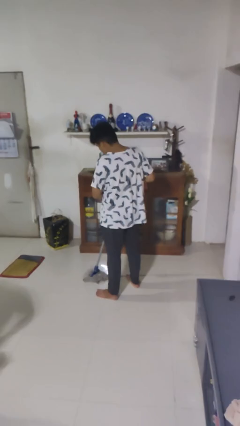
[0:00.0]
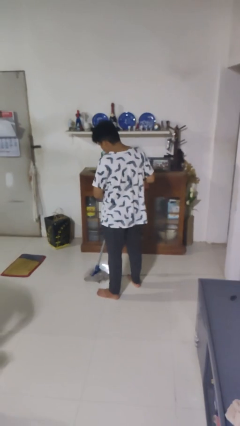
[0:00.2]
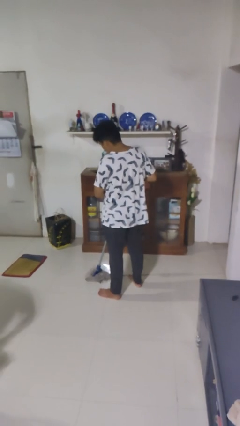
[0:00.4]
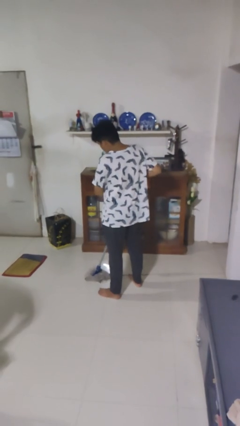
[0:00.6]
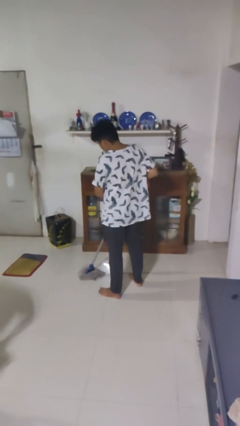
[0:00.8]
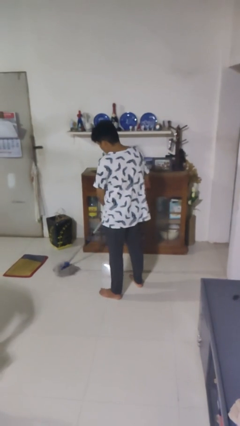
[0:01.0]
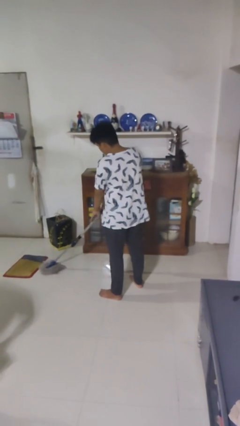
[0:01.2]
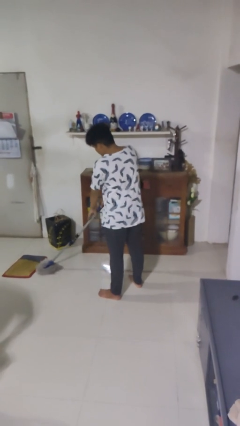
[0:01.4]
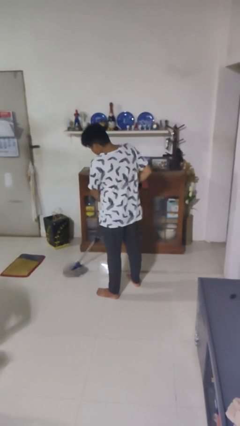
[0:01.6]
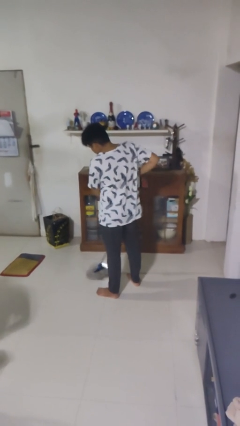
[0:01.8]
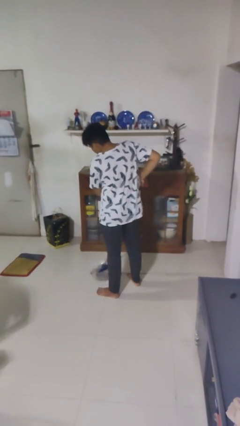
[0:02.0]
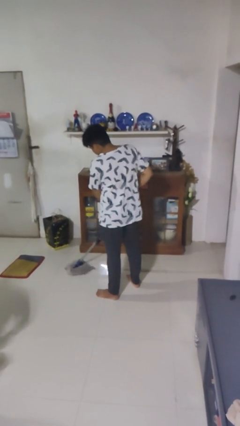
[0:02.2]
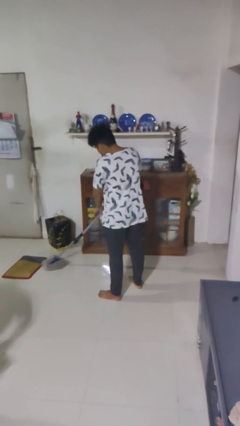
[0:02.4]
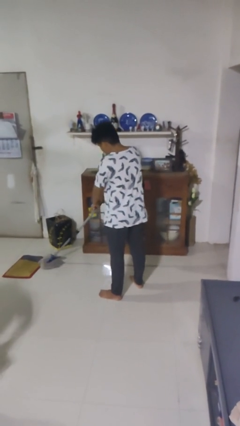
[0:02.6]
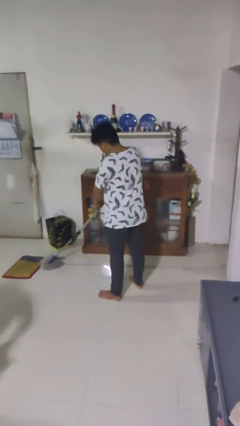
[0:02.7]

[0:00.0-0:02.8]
person mops

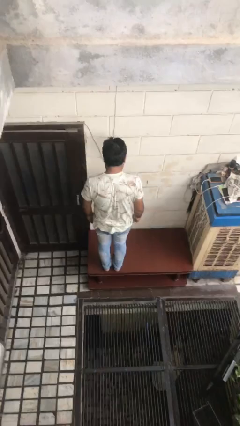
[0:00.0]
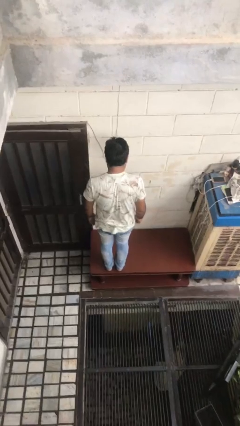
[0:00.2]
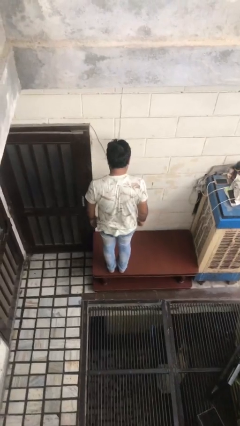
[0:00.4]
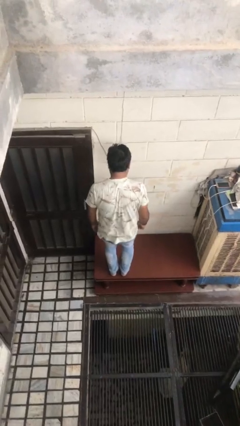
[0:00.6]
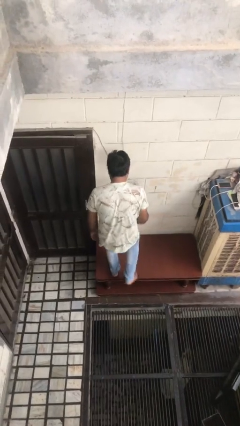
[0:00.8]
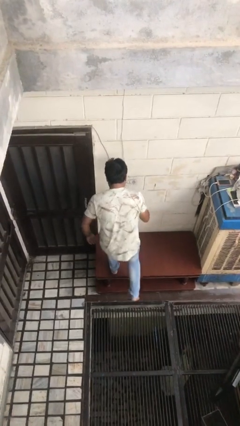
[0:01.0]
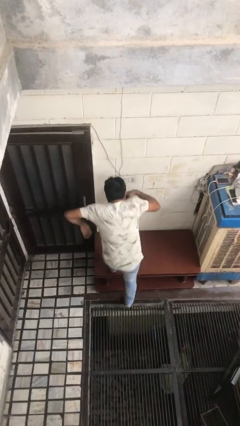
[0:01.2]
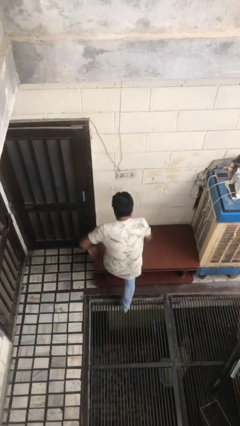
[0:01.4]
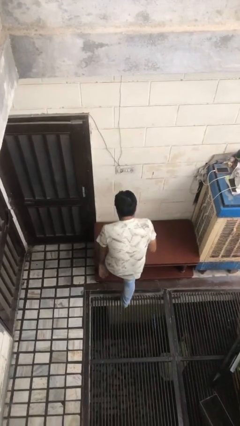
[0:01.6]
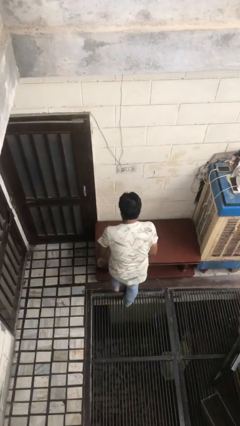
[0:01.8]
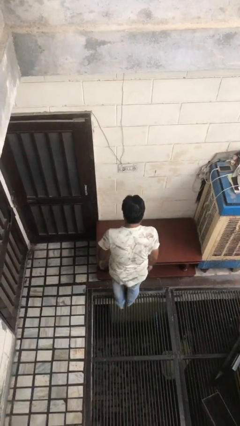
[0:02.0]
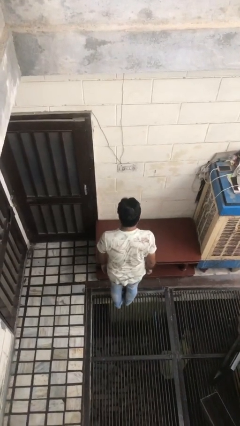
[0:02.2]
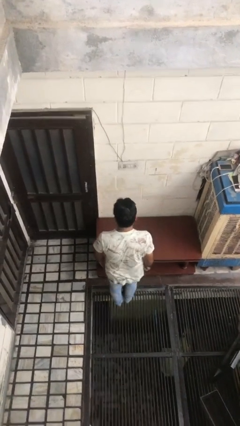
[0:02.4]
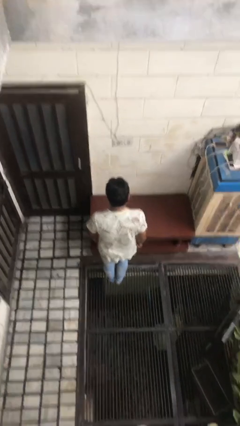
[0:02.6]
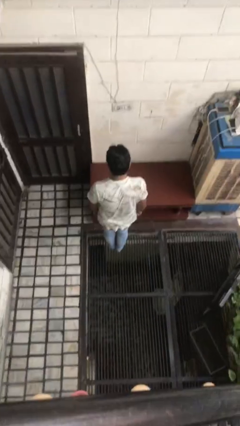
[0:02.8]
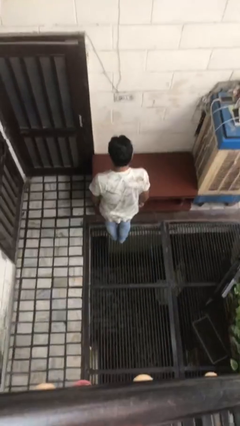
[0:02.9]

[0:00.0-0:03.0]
person climbs off table

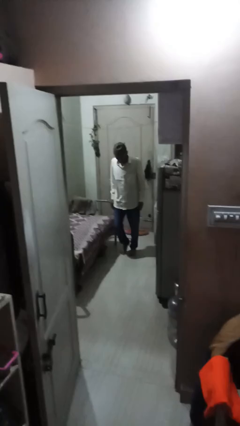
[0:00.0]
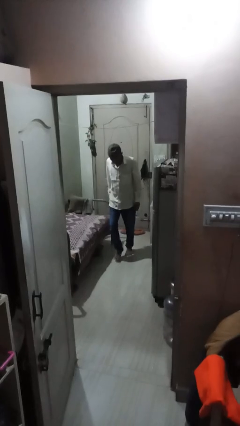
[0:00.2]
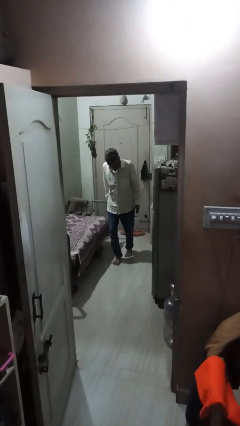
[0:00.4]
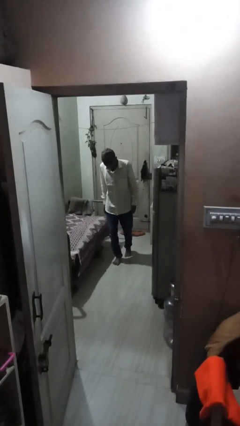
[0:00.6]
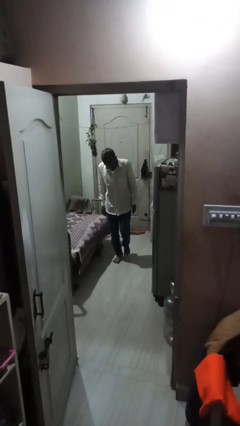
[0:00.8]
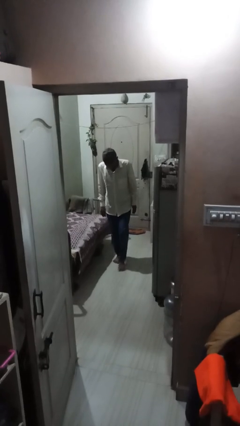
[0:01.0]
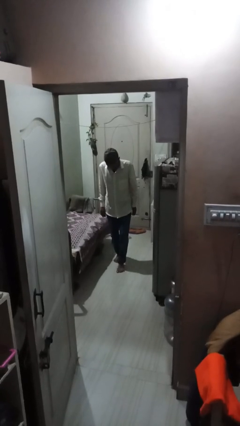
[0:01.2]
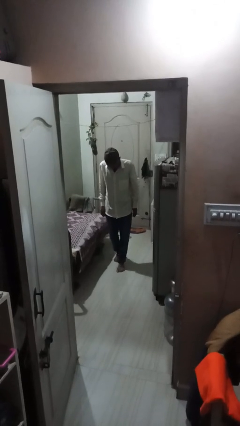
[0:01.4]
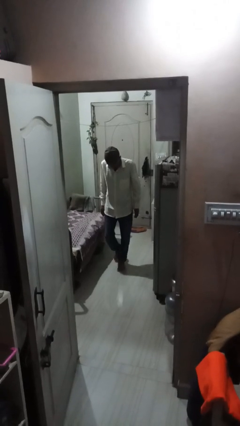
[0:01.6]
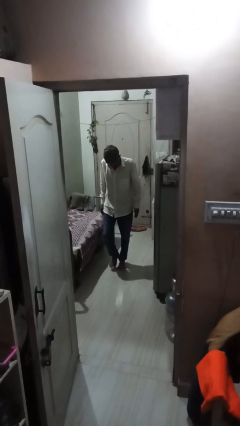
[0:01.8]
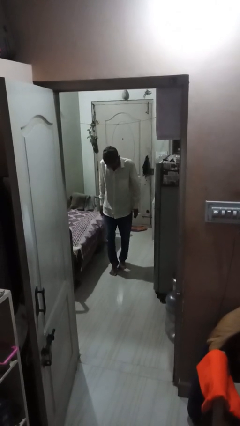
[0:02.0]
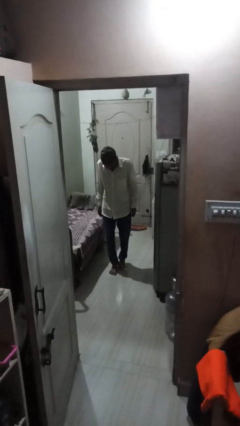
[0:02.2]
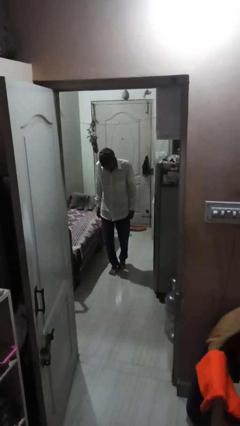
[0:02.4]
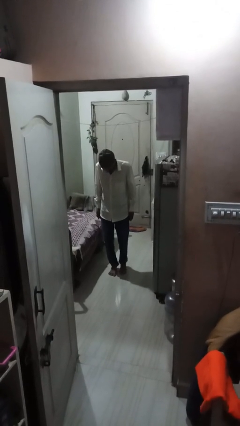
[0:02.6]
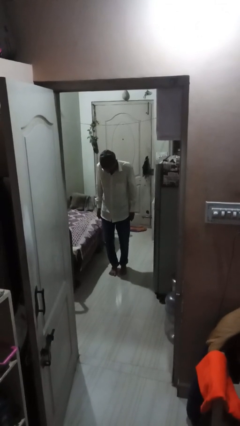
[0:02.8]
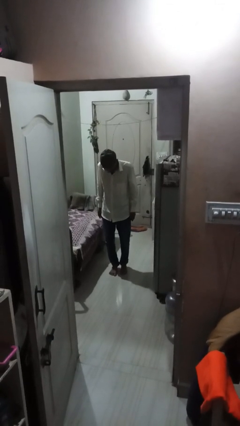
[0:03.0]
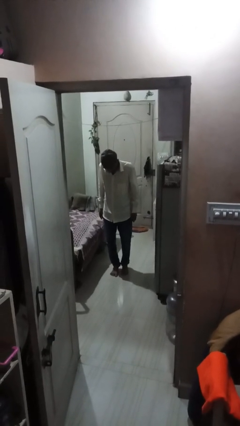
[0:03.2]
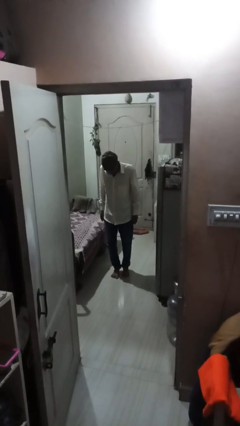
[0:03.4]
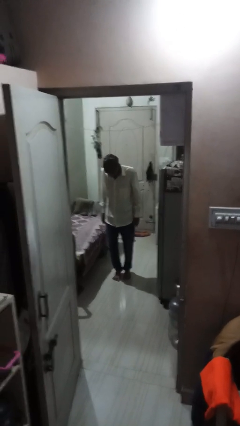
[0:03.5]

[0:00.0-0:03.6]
person walks tiptoe

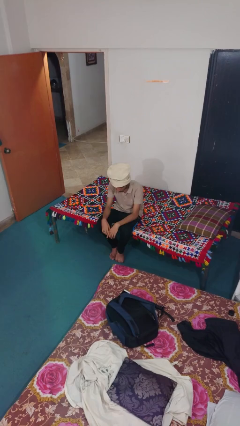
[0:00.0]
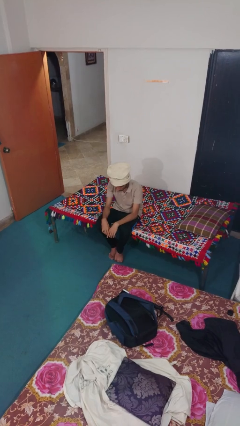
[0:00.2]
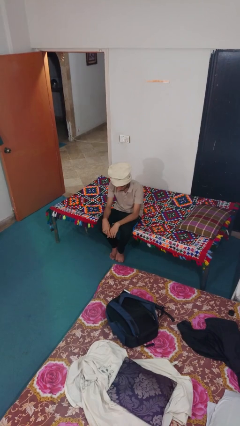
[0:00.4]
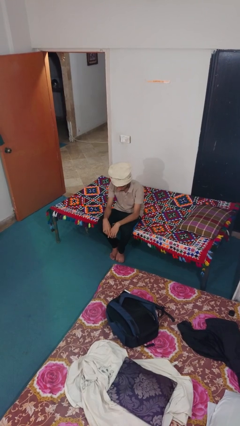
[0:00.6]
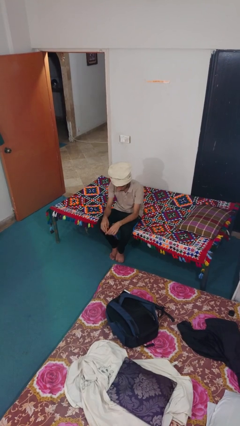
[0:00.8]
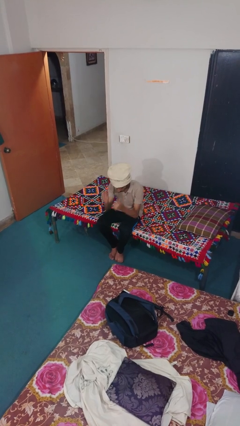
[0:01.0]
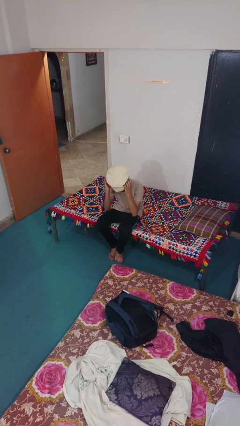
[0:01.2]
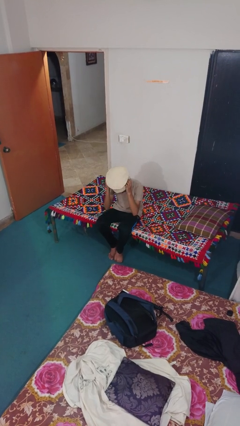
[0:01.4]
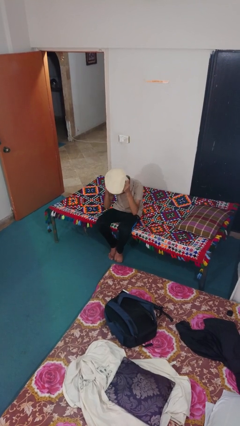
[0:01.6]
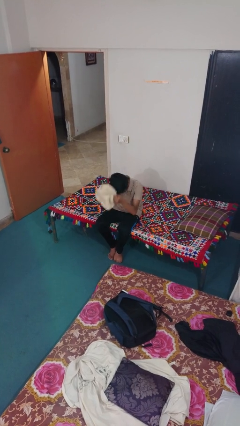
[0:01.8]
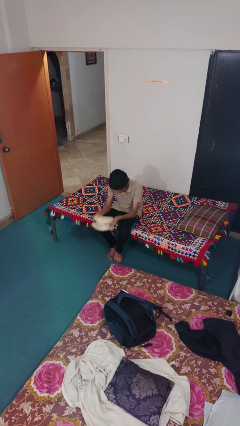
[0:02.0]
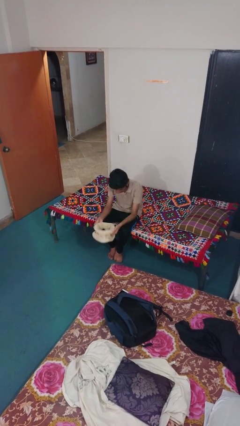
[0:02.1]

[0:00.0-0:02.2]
person takes off hat

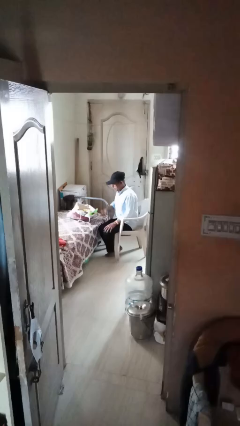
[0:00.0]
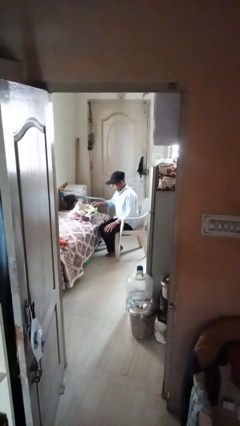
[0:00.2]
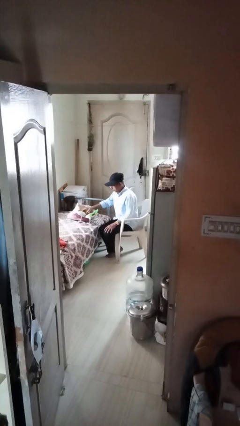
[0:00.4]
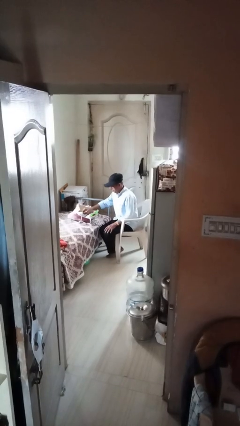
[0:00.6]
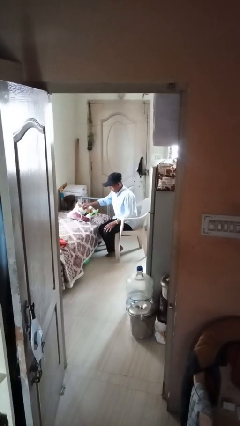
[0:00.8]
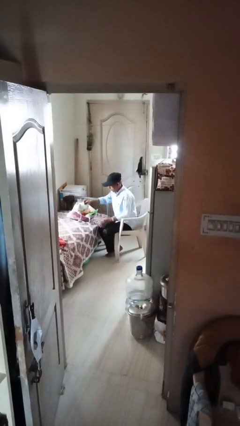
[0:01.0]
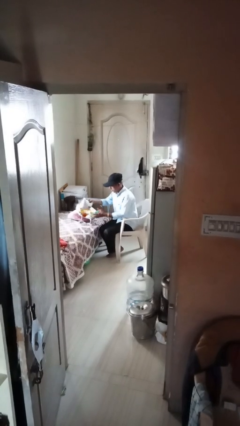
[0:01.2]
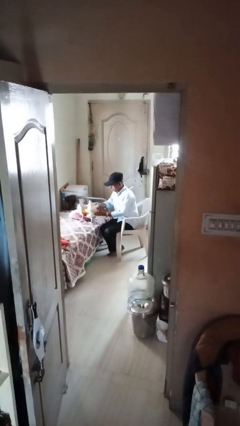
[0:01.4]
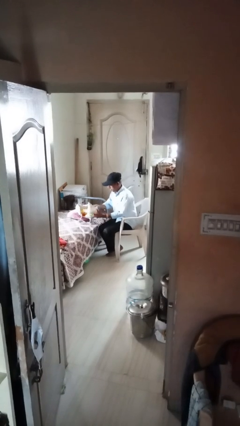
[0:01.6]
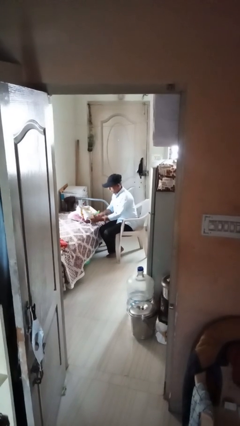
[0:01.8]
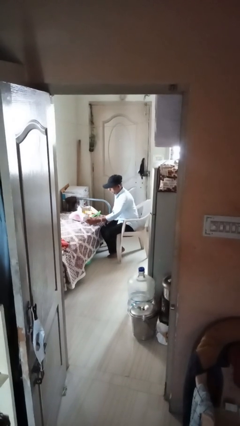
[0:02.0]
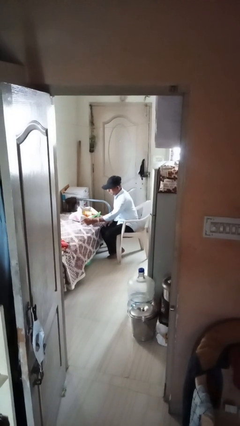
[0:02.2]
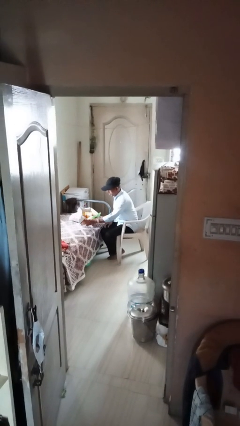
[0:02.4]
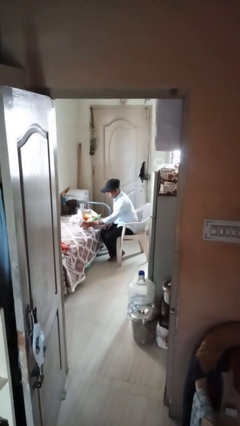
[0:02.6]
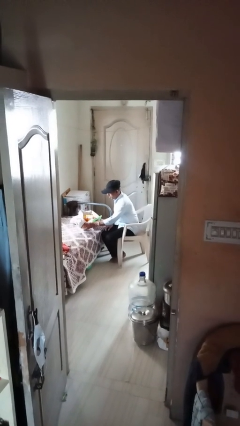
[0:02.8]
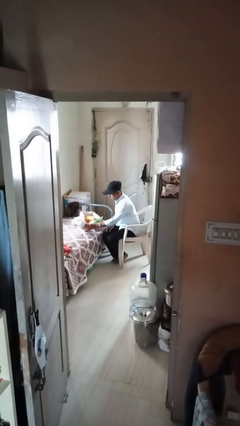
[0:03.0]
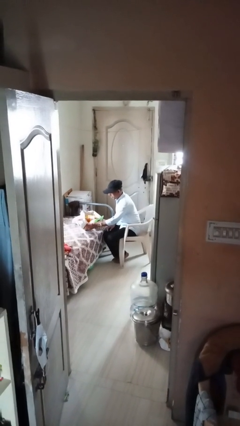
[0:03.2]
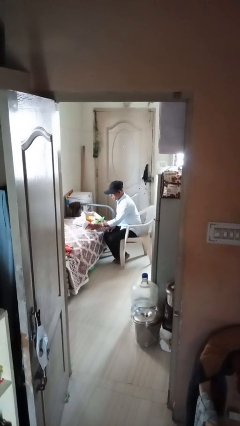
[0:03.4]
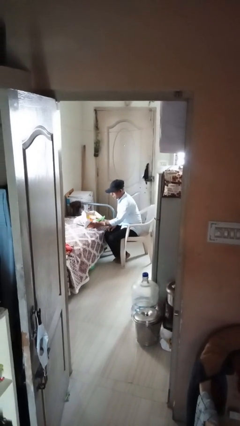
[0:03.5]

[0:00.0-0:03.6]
person takes object from bag

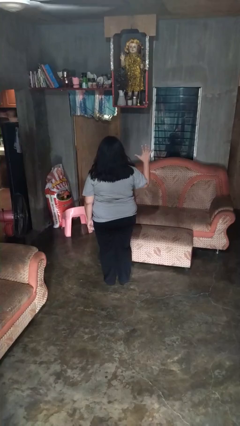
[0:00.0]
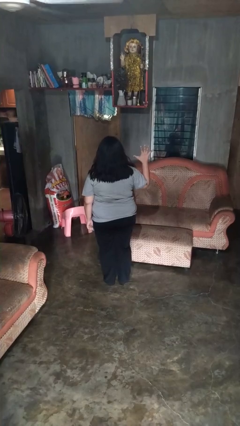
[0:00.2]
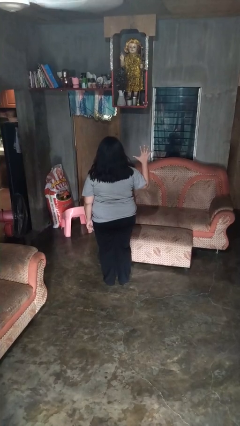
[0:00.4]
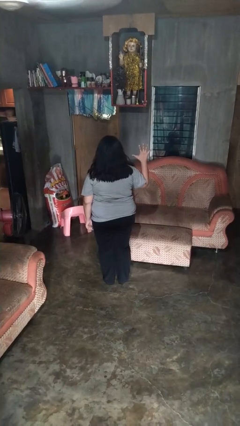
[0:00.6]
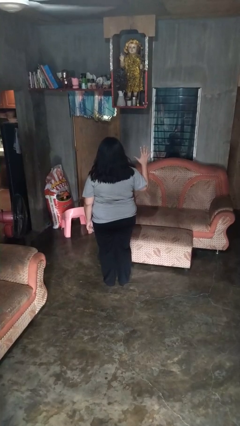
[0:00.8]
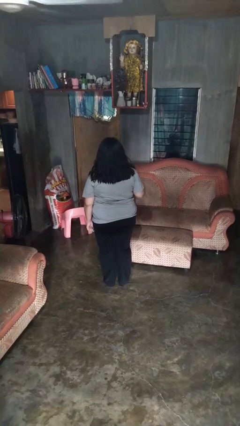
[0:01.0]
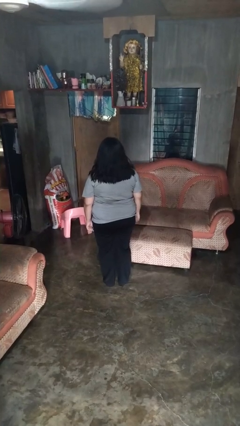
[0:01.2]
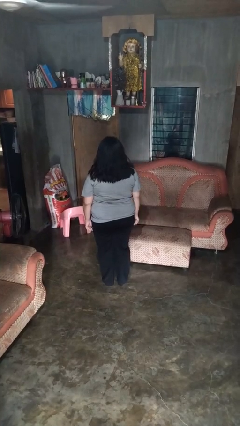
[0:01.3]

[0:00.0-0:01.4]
person gestures number five

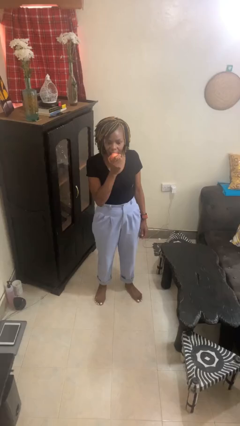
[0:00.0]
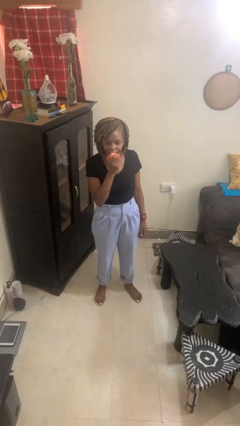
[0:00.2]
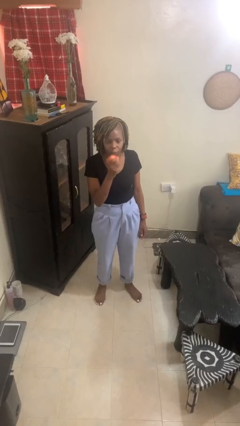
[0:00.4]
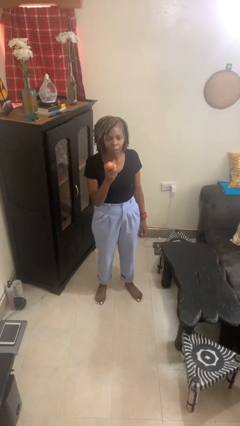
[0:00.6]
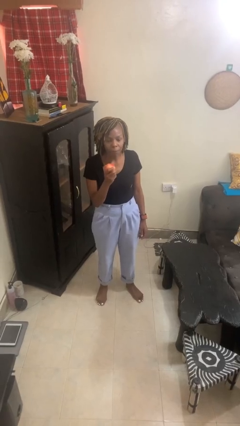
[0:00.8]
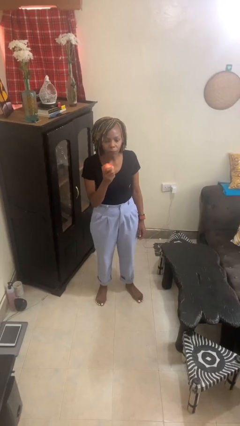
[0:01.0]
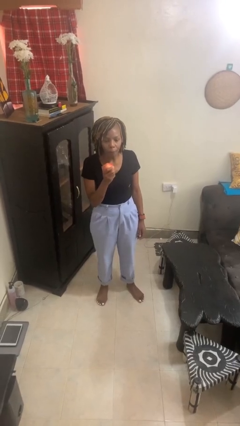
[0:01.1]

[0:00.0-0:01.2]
person eats apple
